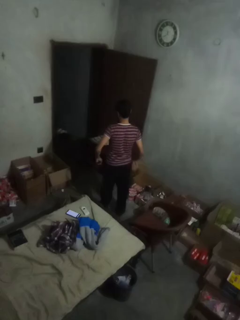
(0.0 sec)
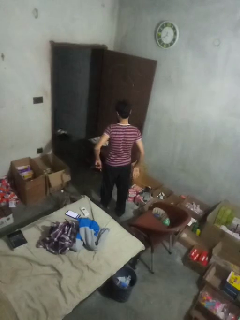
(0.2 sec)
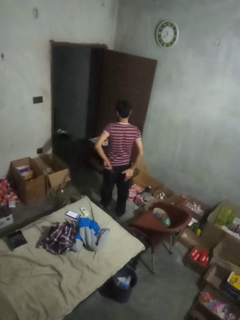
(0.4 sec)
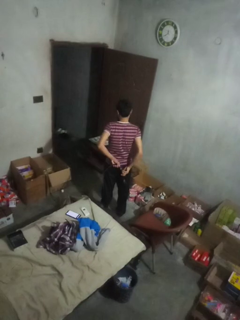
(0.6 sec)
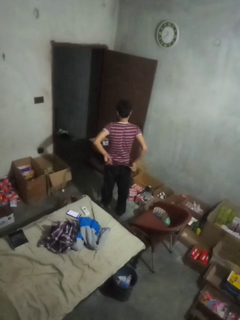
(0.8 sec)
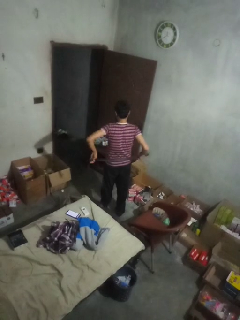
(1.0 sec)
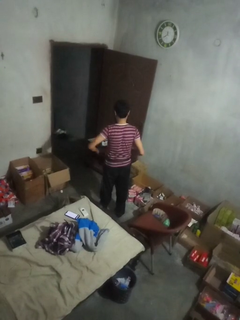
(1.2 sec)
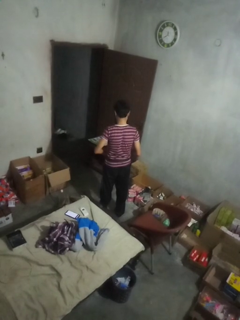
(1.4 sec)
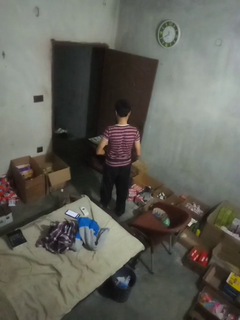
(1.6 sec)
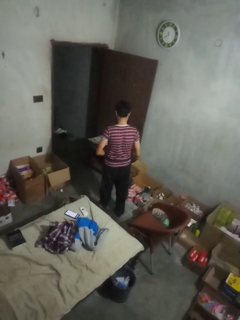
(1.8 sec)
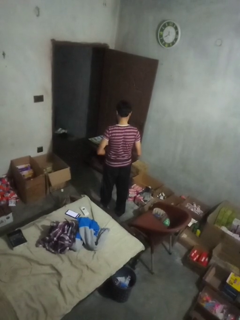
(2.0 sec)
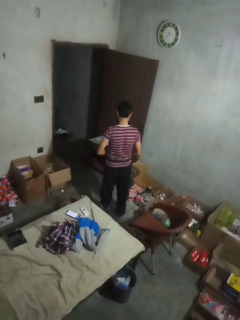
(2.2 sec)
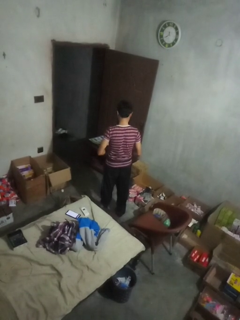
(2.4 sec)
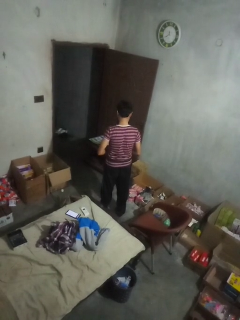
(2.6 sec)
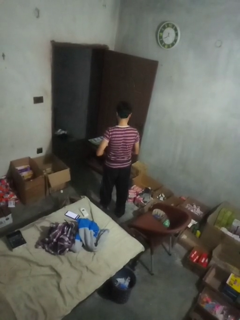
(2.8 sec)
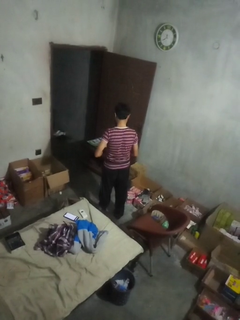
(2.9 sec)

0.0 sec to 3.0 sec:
person puts on belt

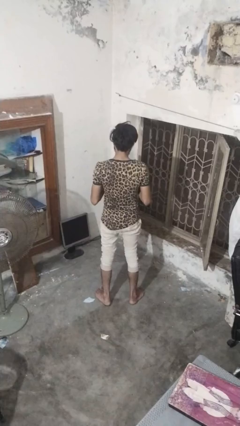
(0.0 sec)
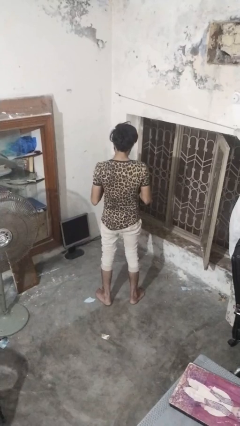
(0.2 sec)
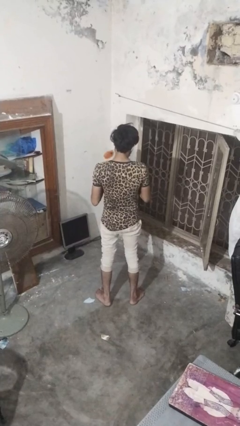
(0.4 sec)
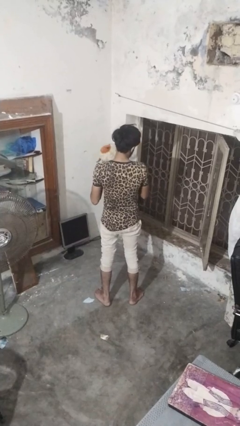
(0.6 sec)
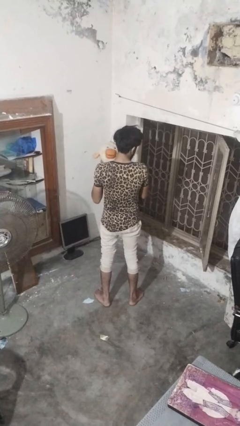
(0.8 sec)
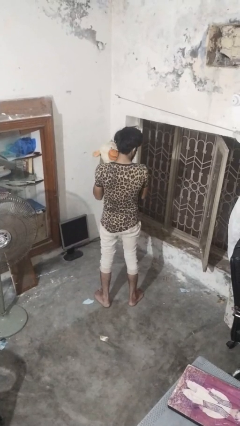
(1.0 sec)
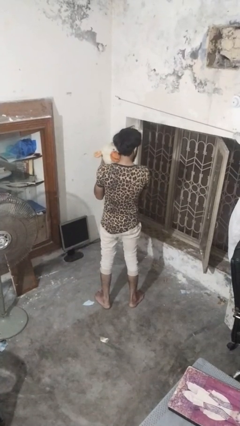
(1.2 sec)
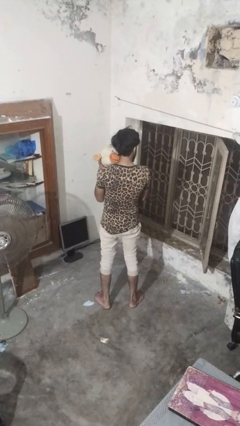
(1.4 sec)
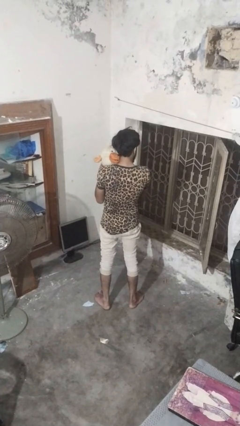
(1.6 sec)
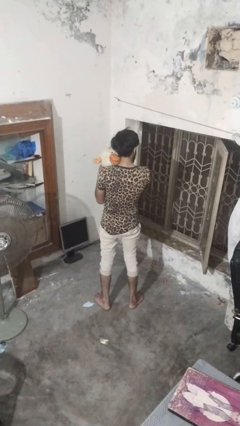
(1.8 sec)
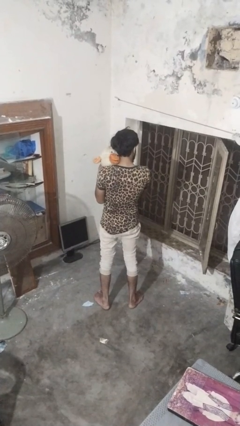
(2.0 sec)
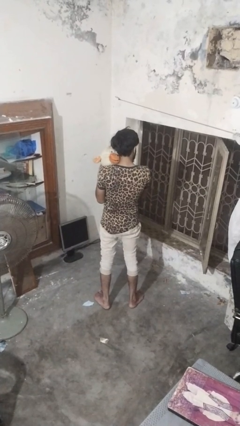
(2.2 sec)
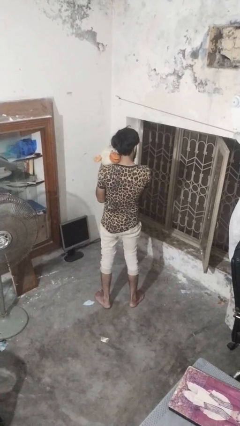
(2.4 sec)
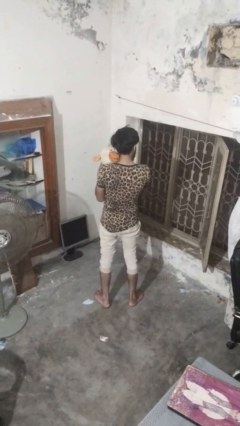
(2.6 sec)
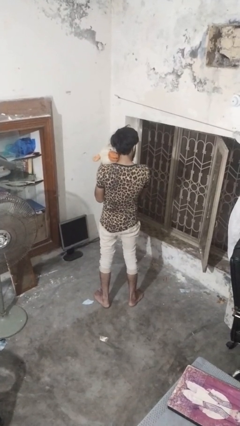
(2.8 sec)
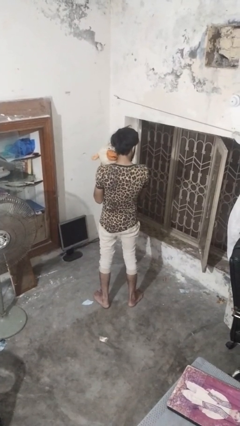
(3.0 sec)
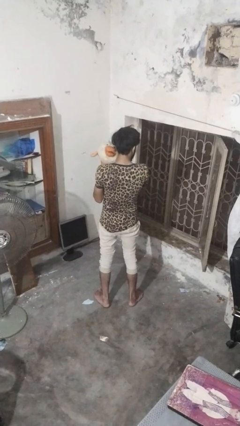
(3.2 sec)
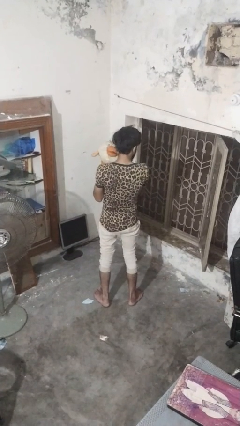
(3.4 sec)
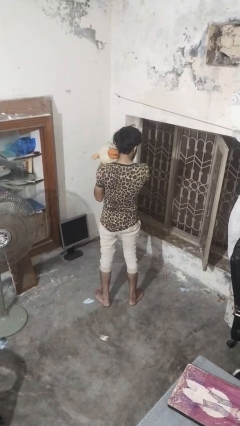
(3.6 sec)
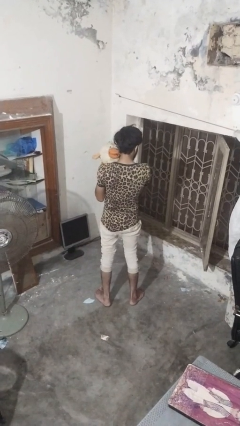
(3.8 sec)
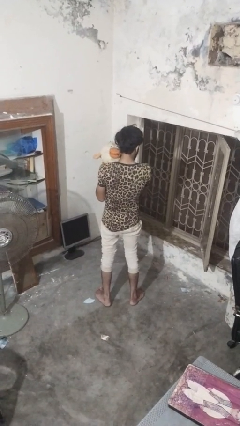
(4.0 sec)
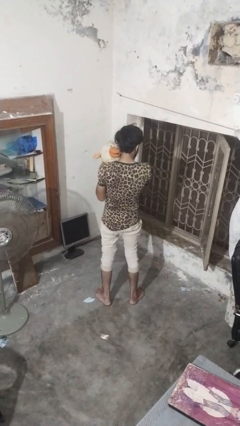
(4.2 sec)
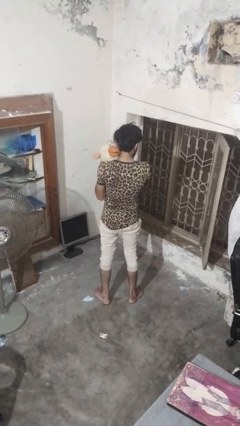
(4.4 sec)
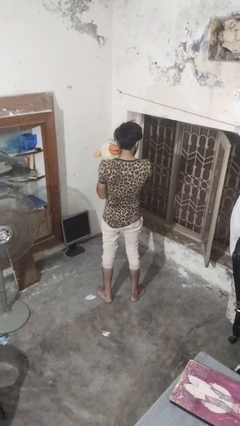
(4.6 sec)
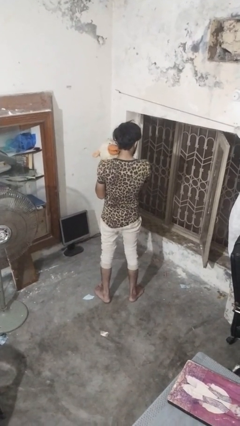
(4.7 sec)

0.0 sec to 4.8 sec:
person hugs stuffed animal

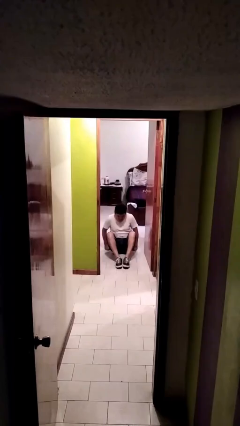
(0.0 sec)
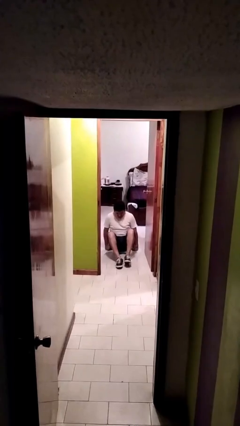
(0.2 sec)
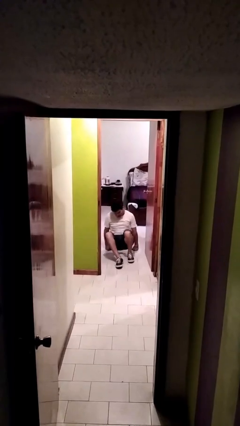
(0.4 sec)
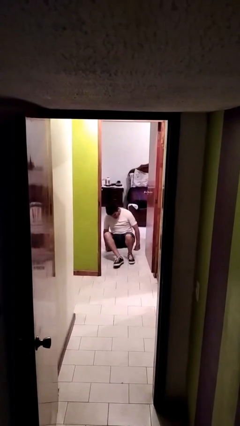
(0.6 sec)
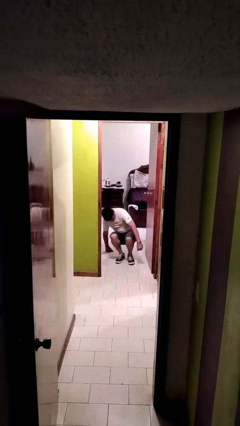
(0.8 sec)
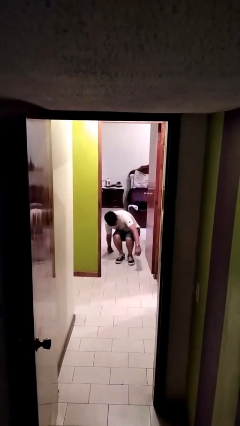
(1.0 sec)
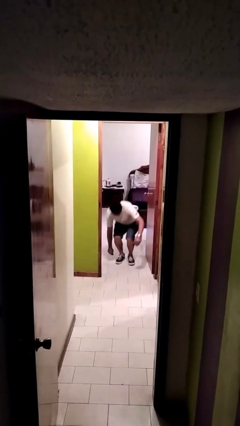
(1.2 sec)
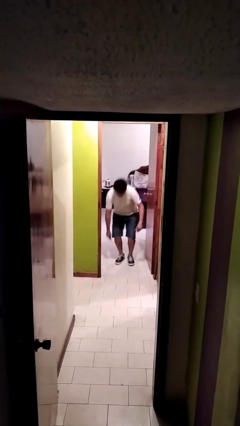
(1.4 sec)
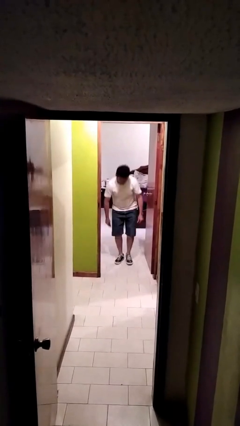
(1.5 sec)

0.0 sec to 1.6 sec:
person stands up

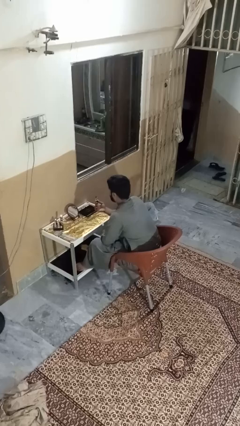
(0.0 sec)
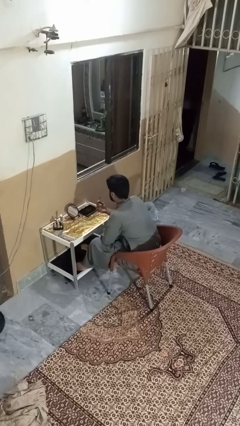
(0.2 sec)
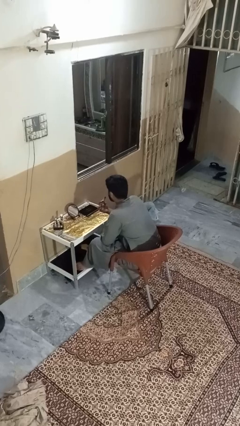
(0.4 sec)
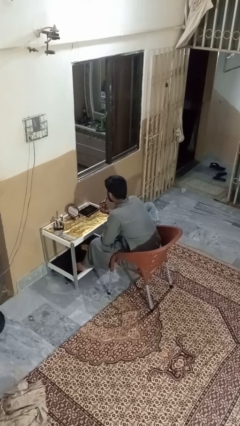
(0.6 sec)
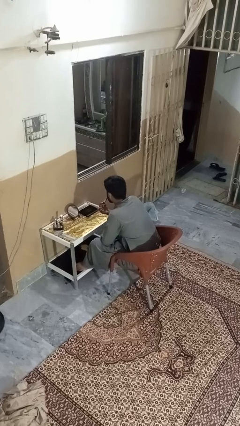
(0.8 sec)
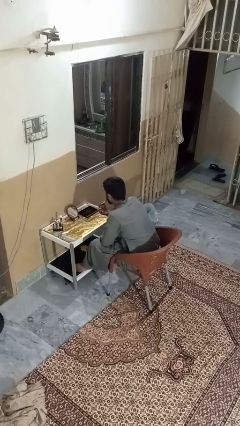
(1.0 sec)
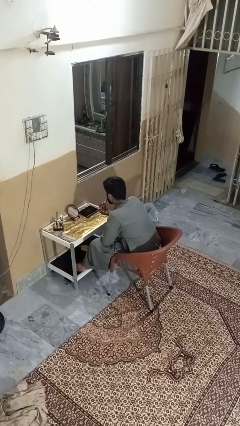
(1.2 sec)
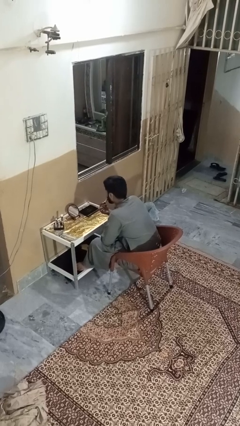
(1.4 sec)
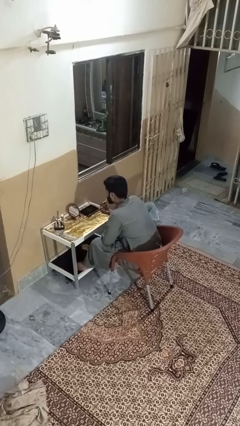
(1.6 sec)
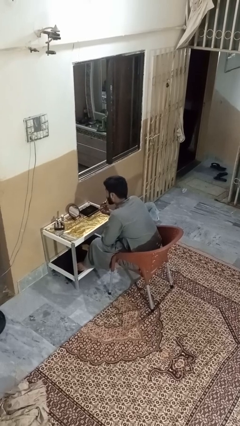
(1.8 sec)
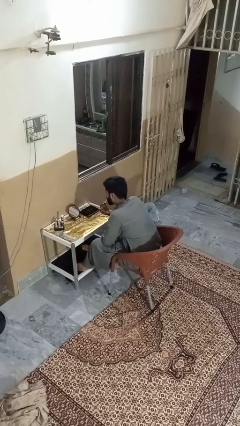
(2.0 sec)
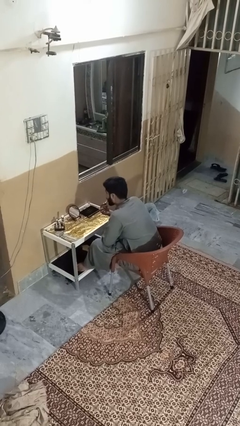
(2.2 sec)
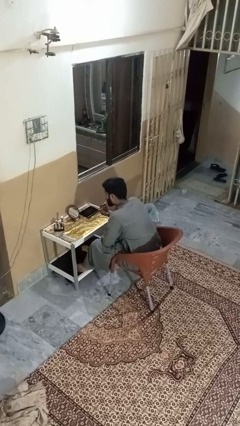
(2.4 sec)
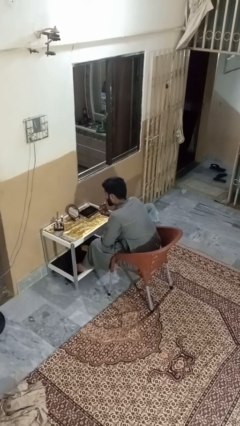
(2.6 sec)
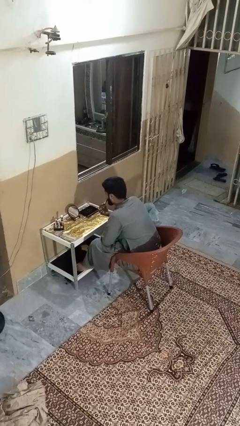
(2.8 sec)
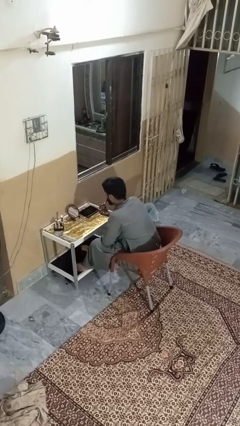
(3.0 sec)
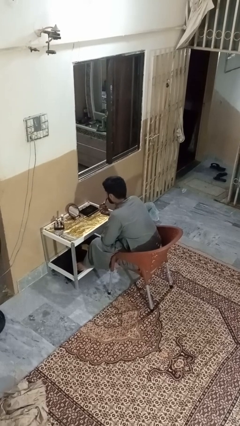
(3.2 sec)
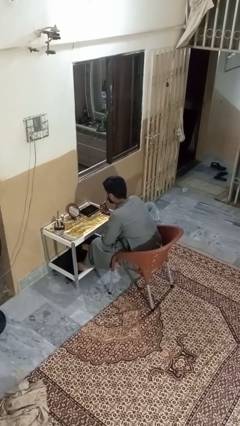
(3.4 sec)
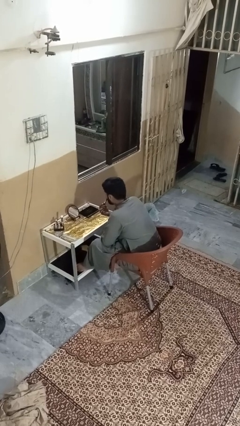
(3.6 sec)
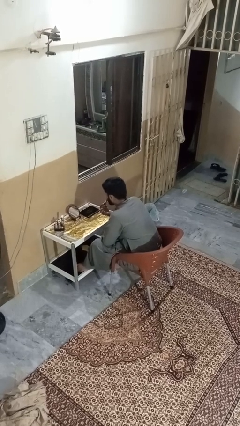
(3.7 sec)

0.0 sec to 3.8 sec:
person applies lip makeup

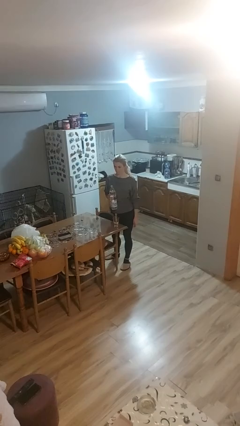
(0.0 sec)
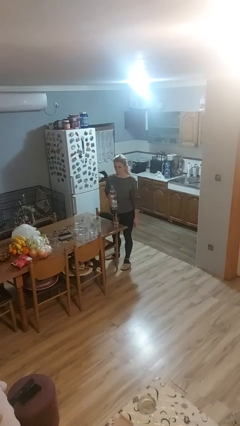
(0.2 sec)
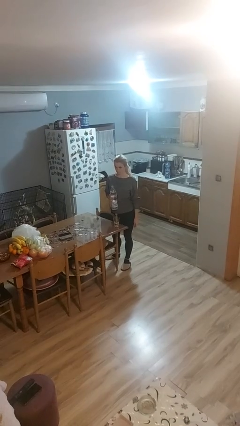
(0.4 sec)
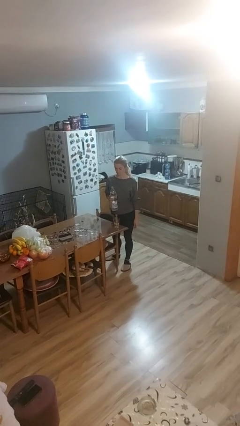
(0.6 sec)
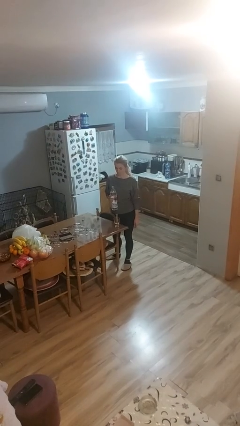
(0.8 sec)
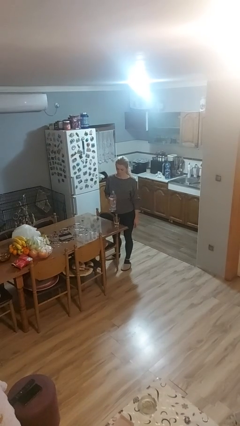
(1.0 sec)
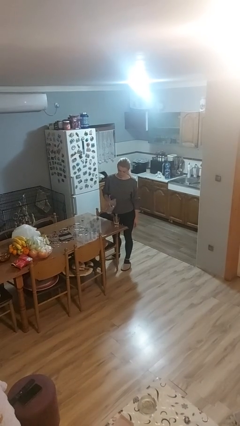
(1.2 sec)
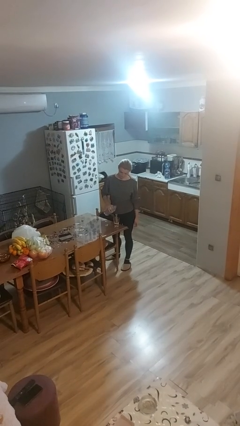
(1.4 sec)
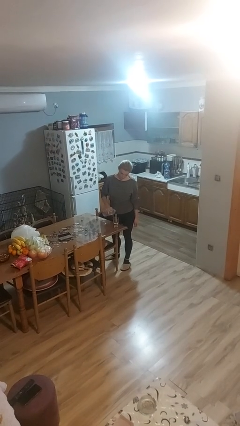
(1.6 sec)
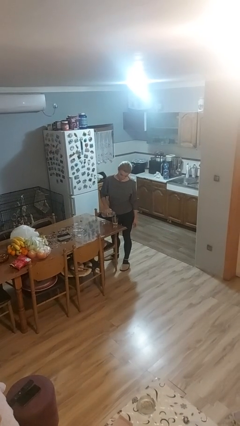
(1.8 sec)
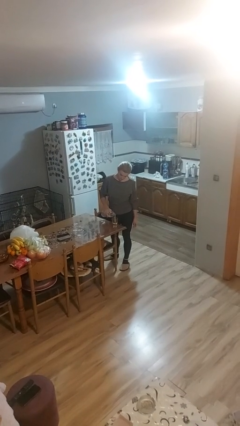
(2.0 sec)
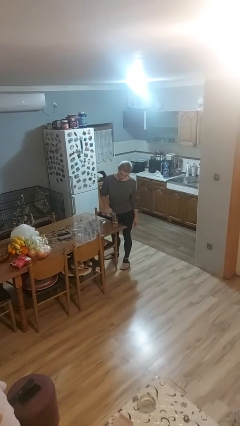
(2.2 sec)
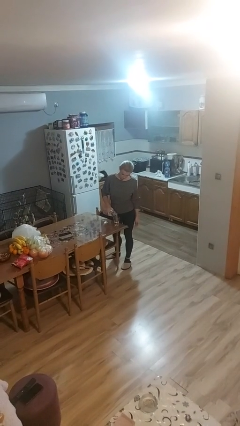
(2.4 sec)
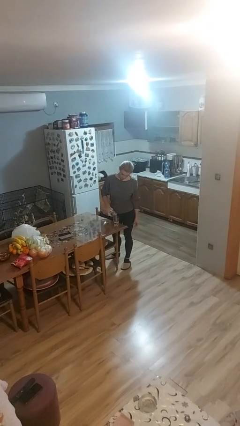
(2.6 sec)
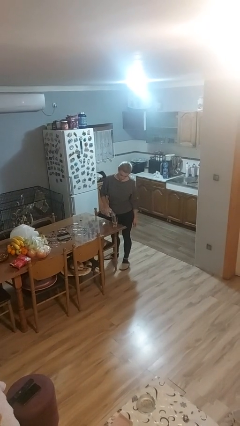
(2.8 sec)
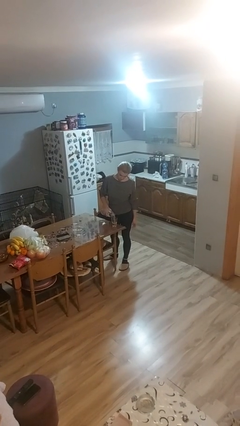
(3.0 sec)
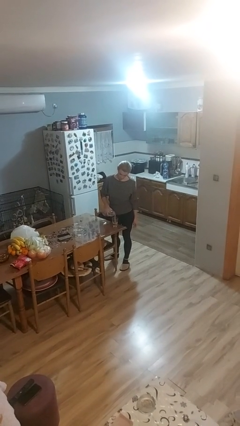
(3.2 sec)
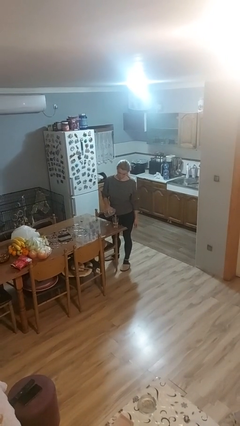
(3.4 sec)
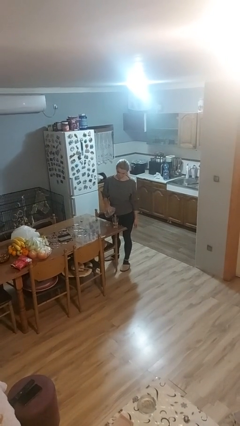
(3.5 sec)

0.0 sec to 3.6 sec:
person pours liquid into cup

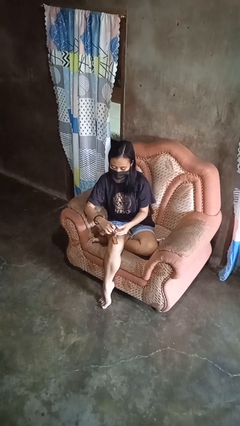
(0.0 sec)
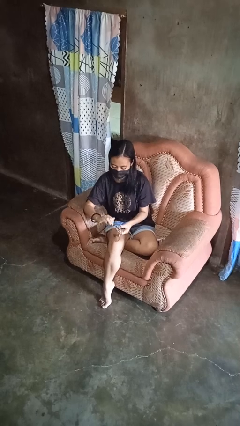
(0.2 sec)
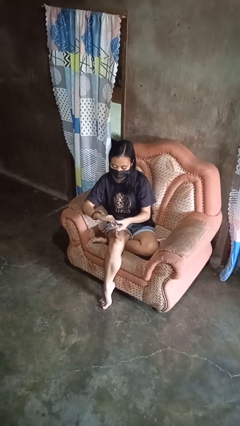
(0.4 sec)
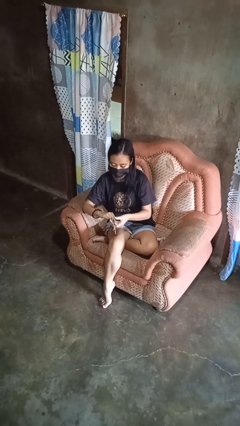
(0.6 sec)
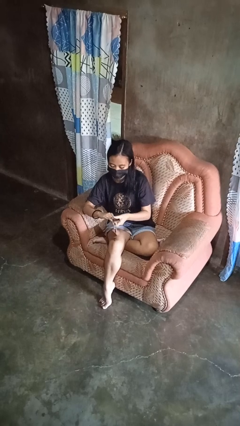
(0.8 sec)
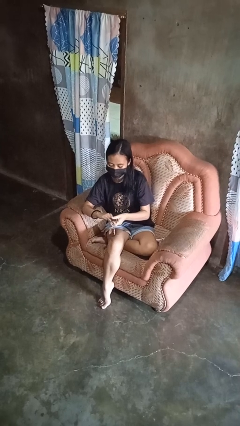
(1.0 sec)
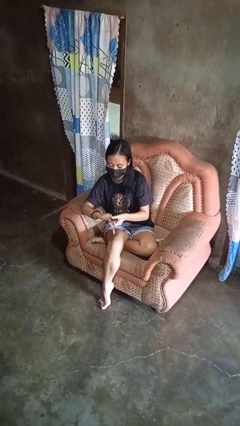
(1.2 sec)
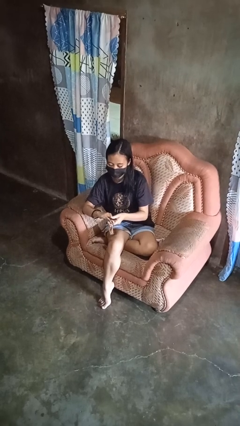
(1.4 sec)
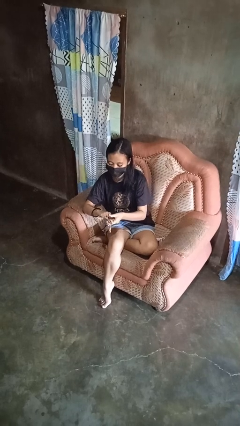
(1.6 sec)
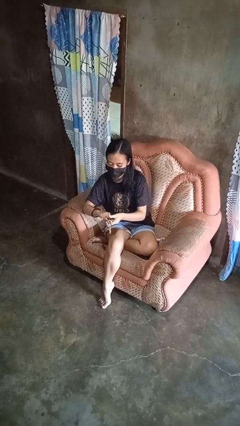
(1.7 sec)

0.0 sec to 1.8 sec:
person clips fingernails
